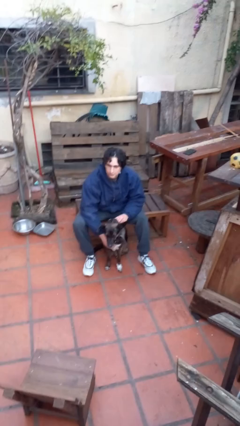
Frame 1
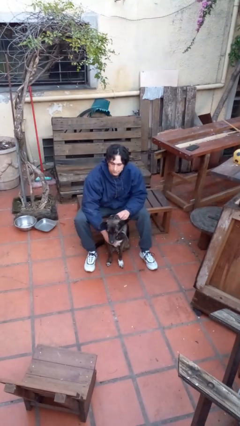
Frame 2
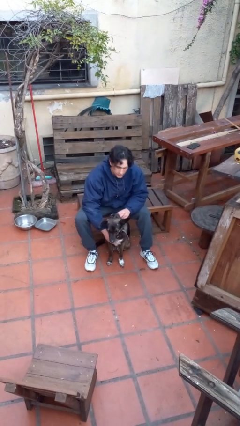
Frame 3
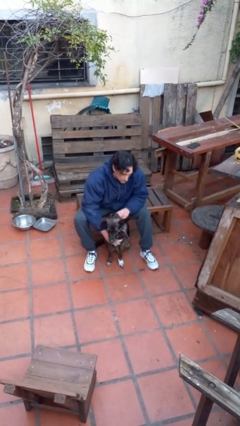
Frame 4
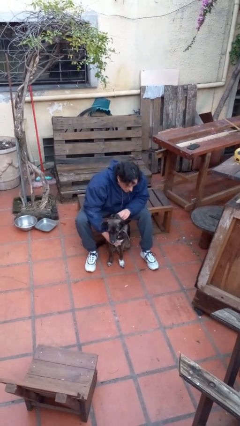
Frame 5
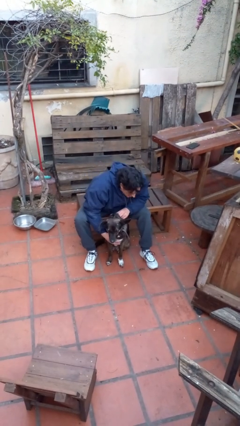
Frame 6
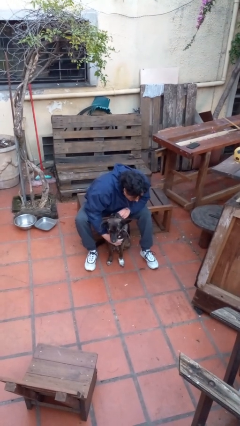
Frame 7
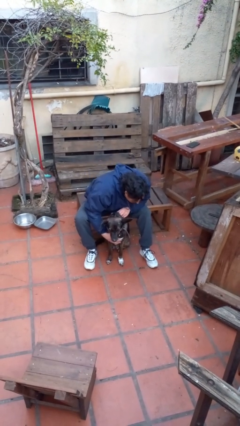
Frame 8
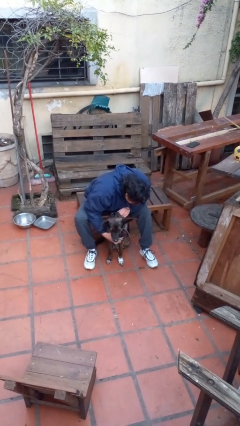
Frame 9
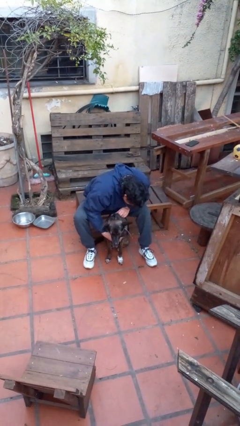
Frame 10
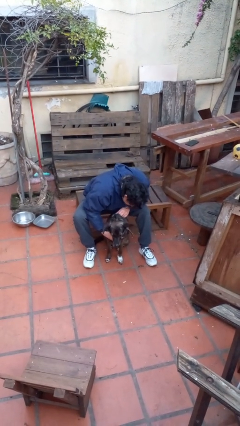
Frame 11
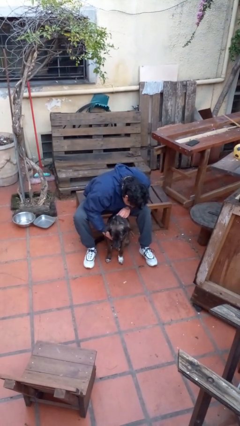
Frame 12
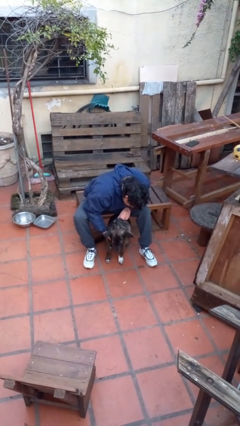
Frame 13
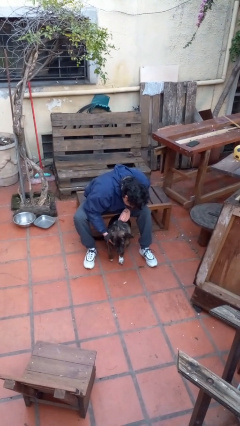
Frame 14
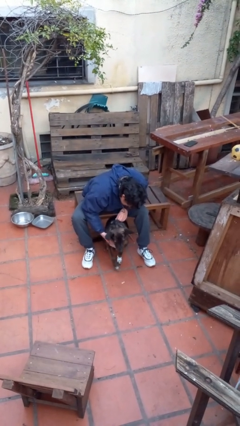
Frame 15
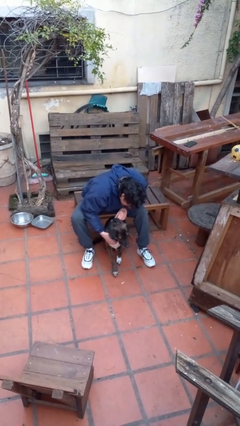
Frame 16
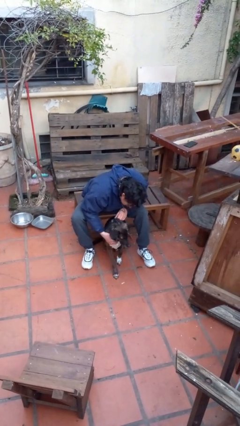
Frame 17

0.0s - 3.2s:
person hugs dog

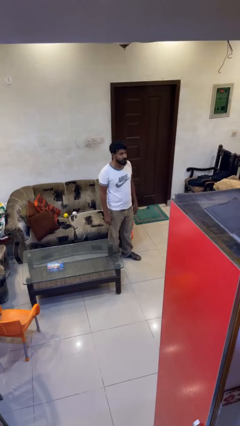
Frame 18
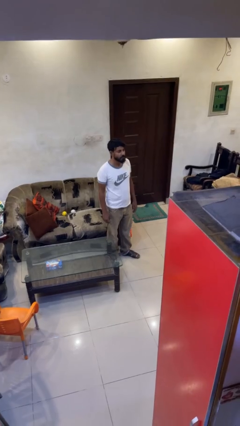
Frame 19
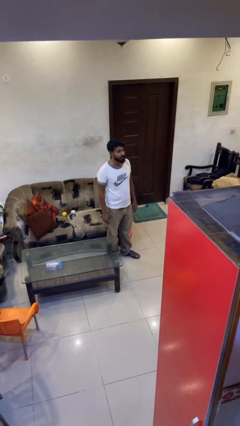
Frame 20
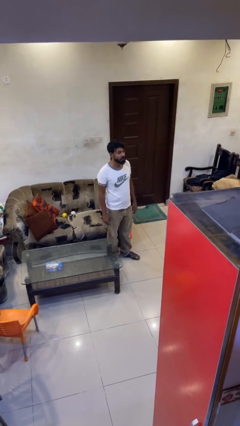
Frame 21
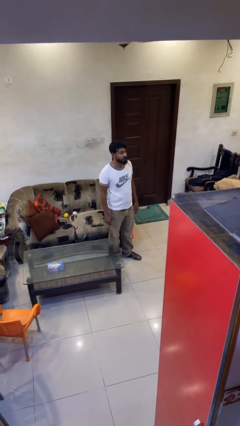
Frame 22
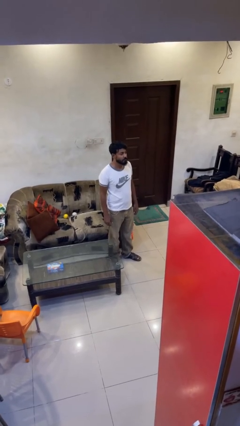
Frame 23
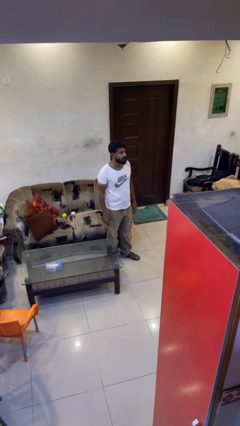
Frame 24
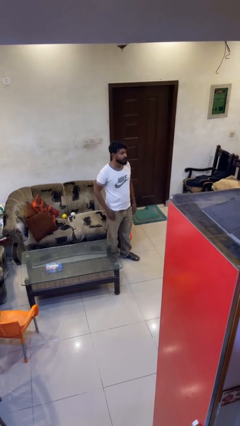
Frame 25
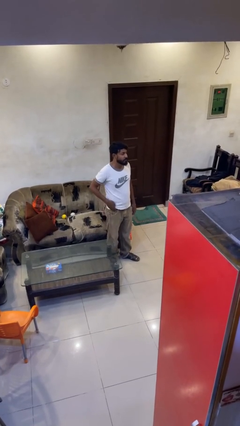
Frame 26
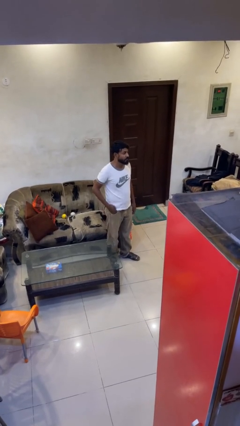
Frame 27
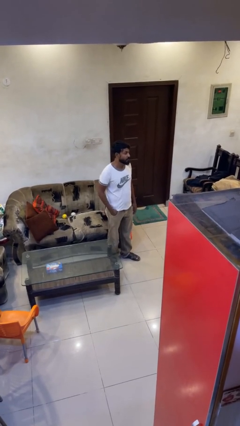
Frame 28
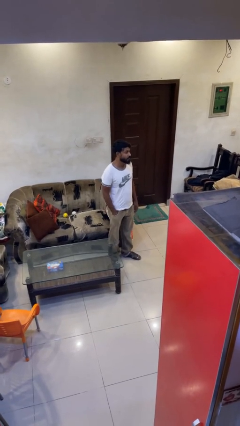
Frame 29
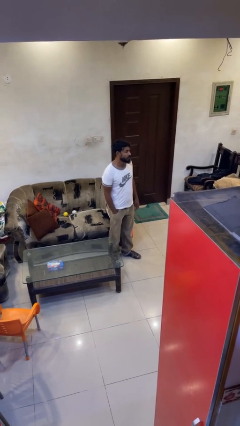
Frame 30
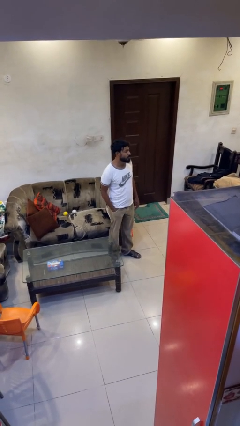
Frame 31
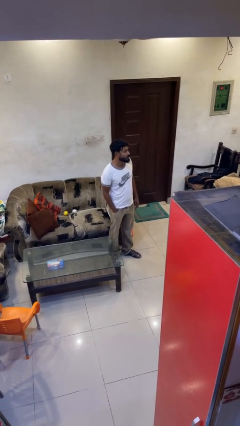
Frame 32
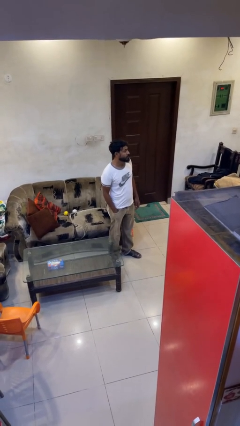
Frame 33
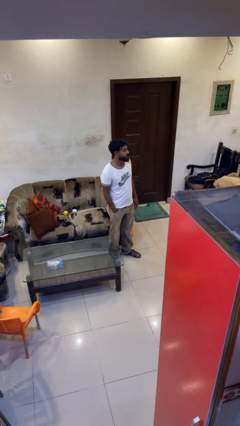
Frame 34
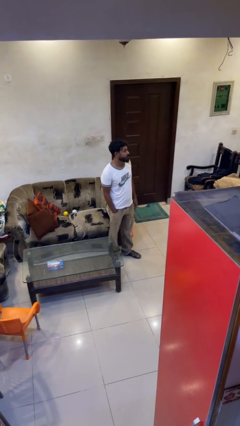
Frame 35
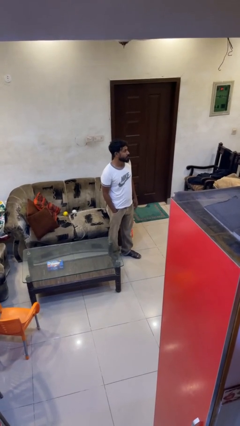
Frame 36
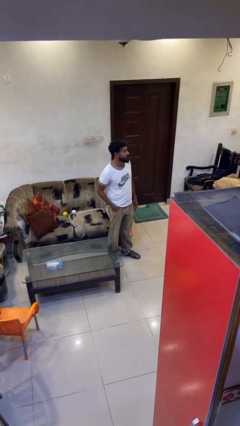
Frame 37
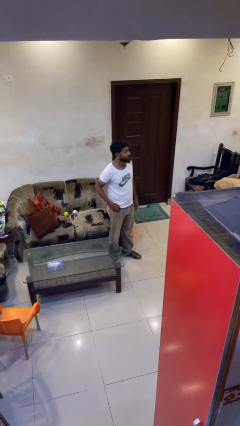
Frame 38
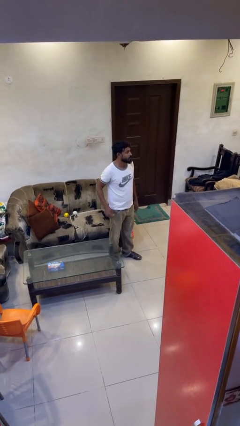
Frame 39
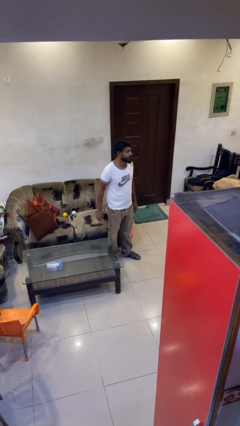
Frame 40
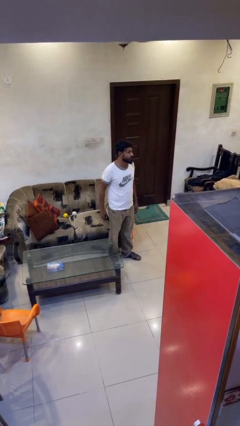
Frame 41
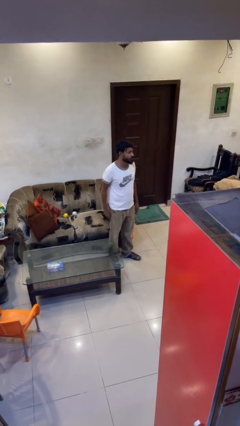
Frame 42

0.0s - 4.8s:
person puts hands in back pockets

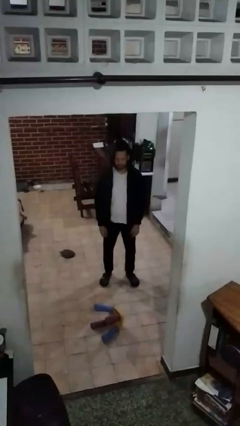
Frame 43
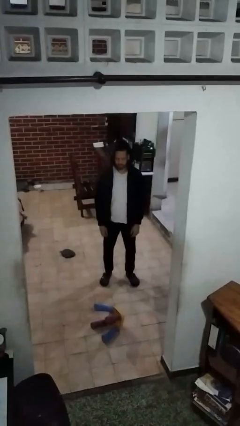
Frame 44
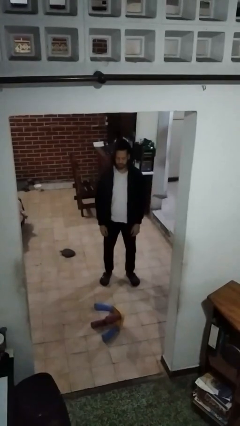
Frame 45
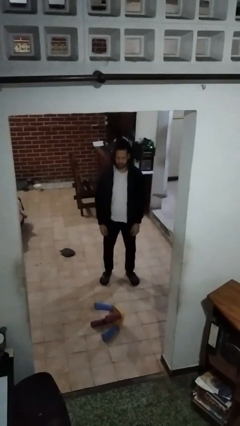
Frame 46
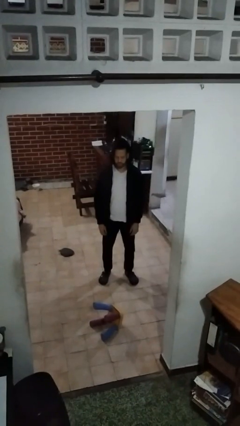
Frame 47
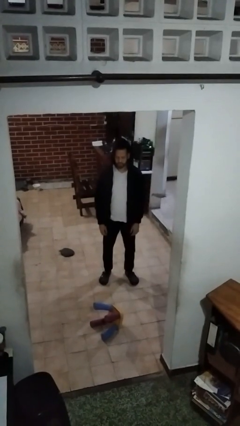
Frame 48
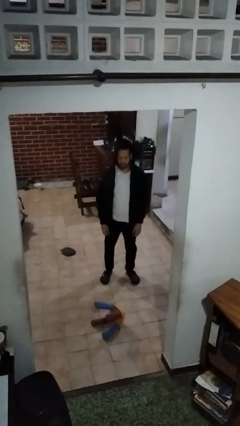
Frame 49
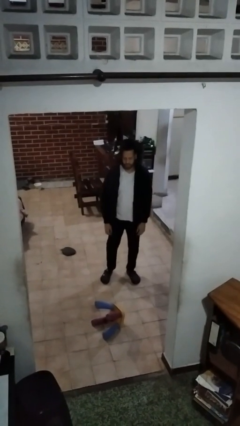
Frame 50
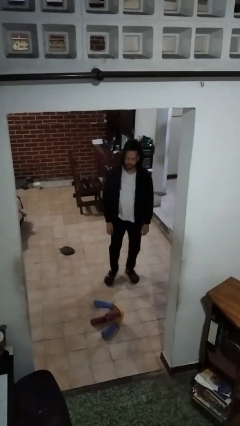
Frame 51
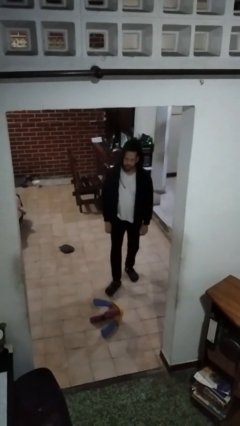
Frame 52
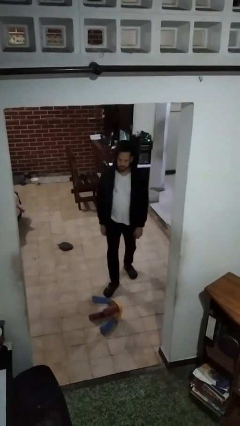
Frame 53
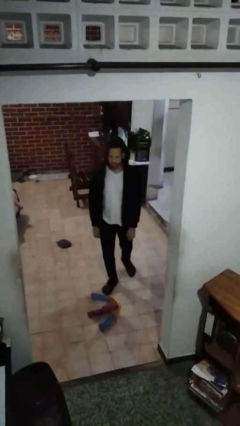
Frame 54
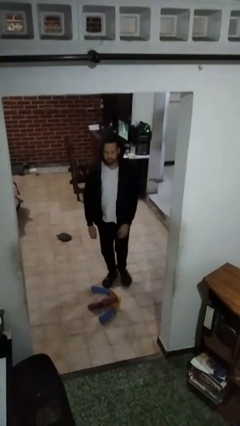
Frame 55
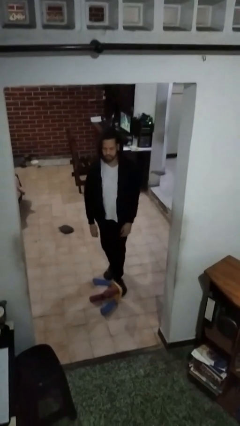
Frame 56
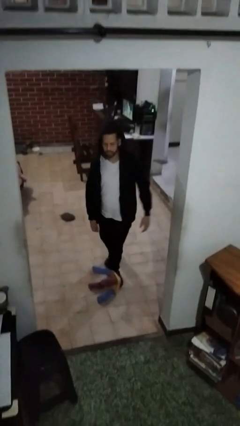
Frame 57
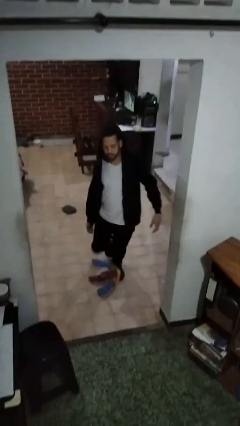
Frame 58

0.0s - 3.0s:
person trips on object on floor

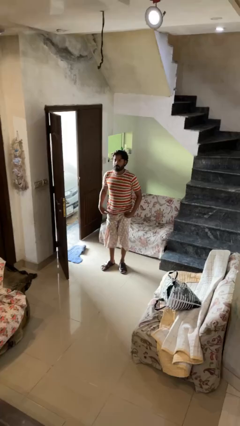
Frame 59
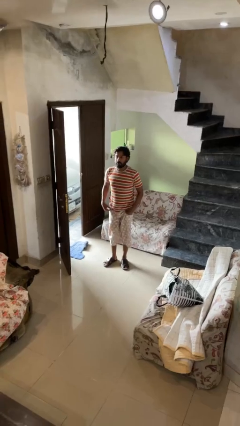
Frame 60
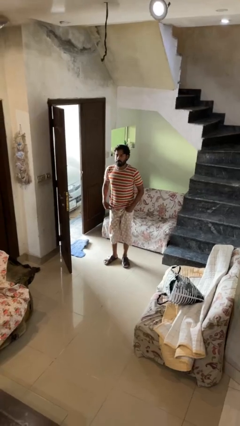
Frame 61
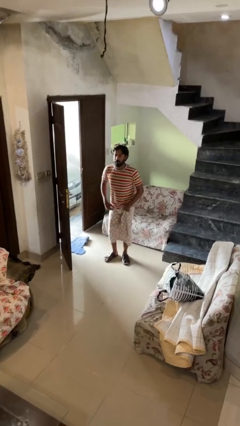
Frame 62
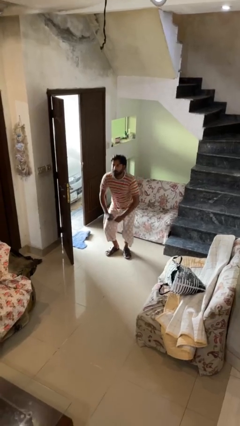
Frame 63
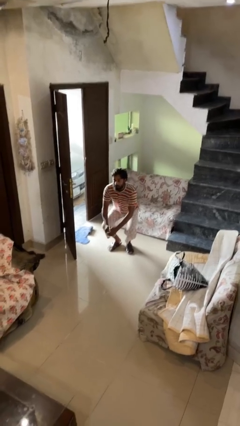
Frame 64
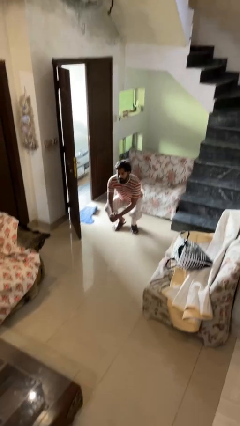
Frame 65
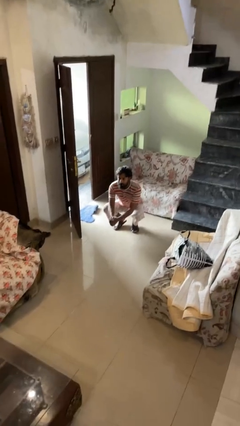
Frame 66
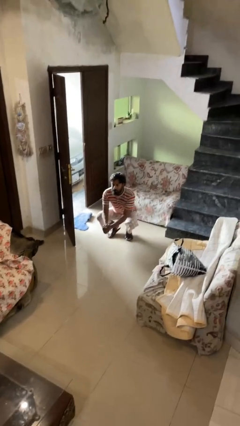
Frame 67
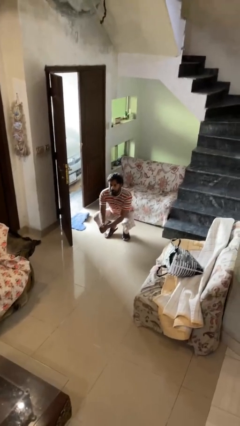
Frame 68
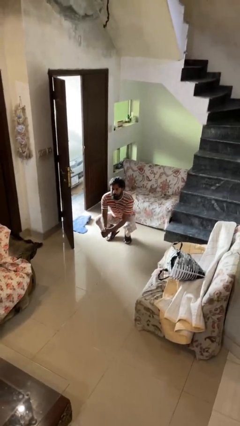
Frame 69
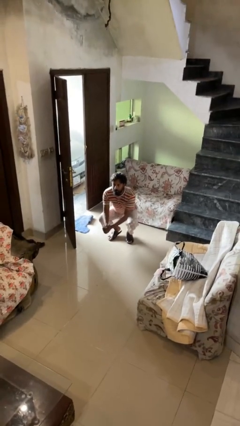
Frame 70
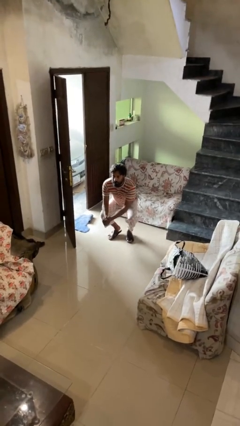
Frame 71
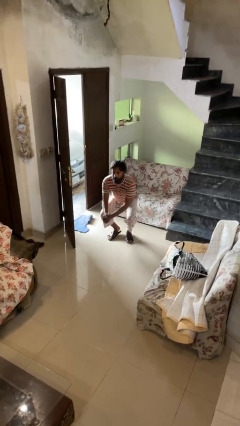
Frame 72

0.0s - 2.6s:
person squats

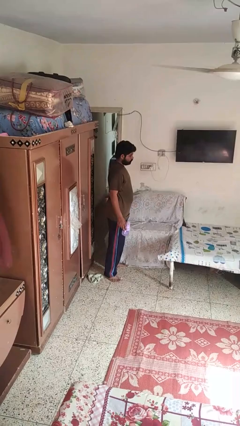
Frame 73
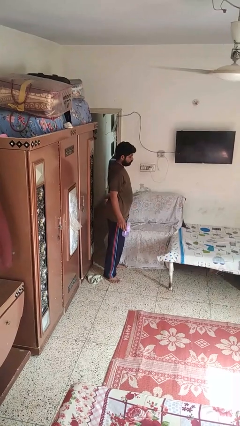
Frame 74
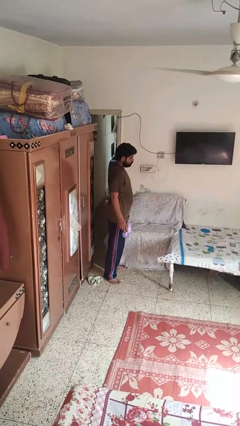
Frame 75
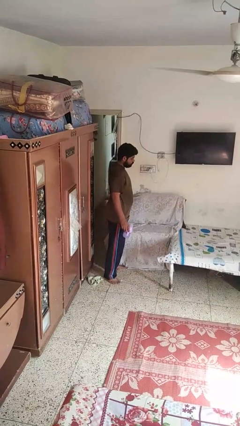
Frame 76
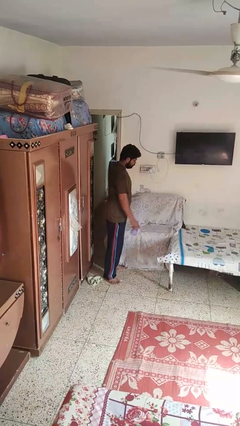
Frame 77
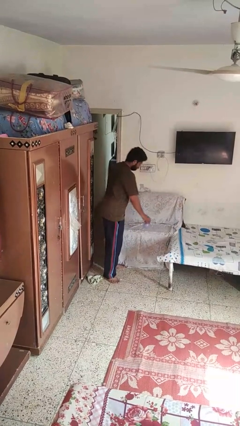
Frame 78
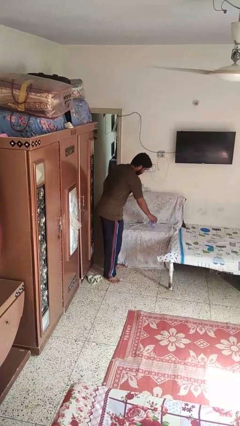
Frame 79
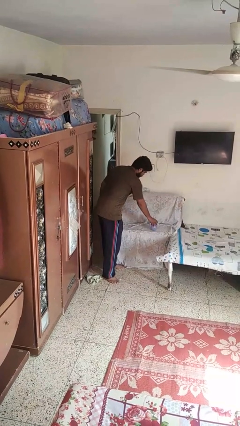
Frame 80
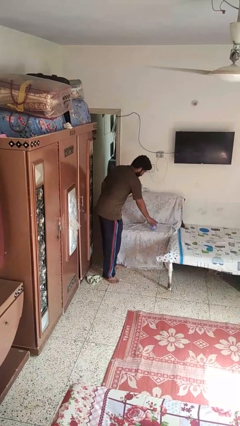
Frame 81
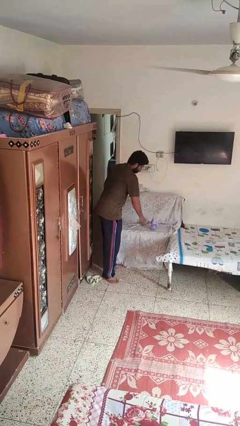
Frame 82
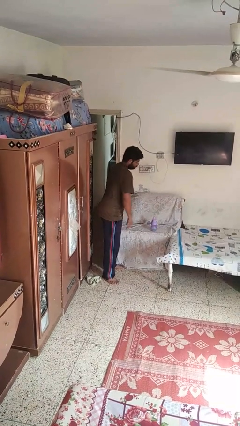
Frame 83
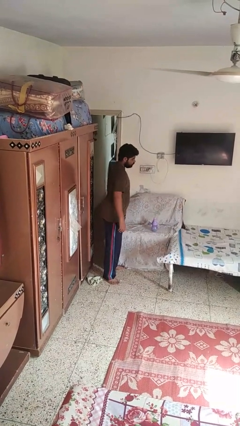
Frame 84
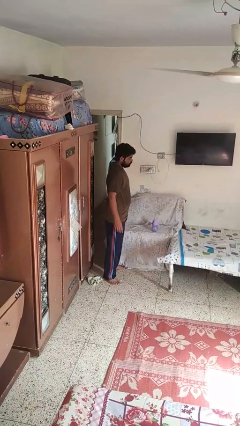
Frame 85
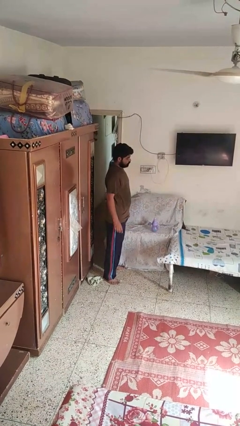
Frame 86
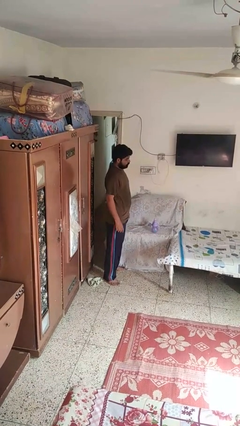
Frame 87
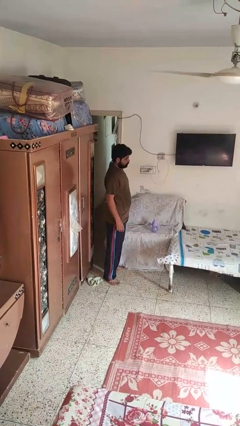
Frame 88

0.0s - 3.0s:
person puts down object on couch

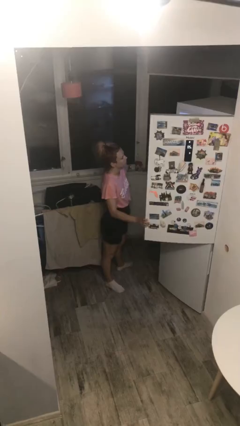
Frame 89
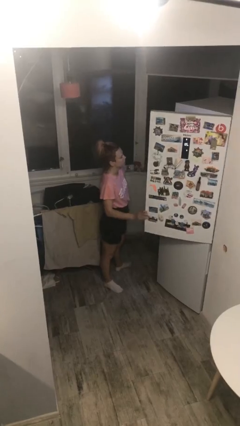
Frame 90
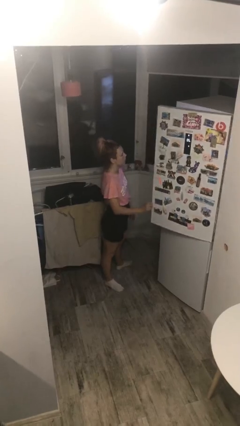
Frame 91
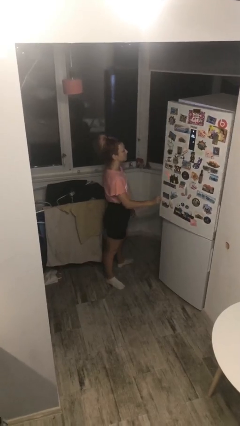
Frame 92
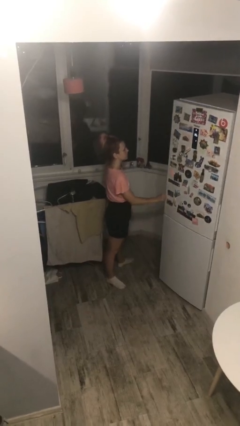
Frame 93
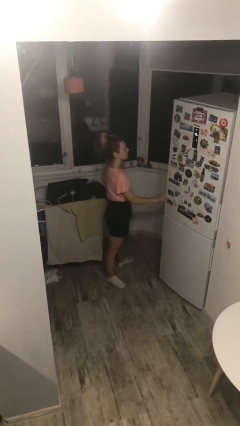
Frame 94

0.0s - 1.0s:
person closes refrigerator
